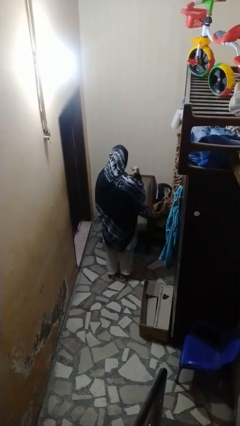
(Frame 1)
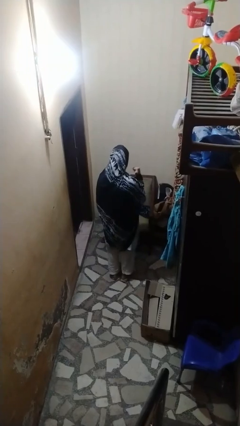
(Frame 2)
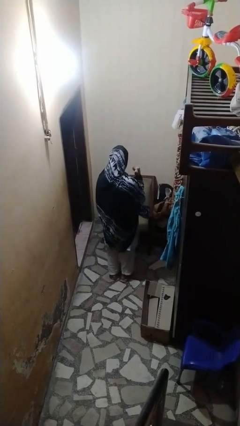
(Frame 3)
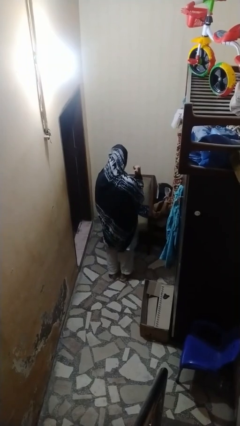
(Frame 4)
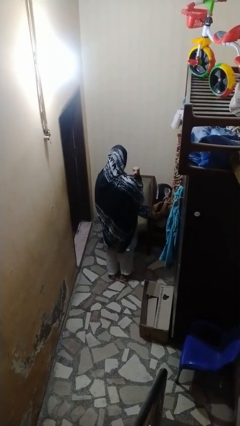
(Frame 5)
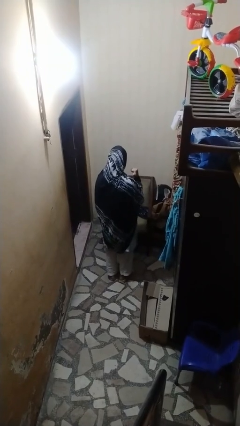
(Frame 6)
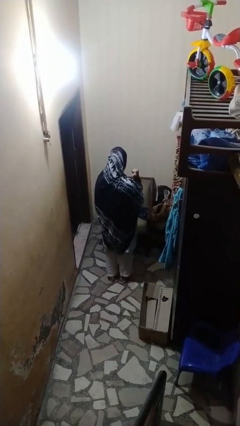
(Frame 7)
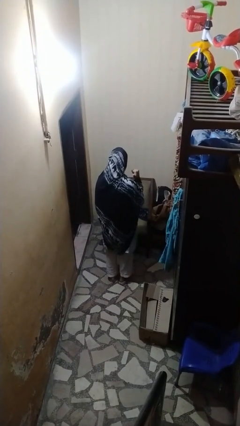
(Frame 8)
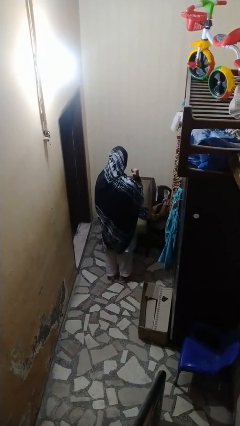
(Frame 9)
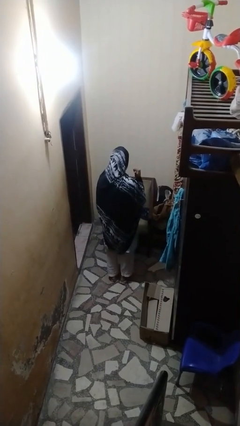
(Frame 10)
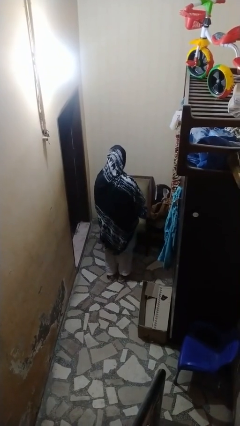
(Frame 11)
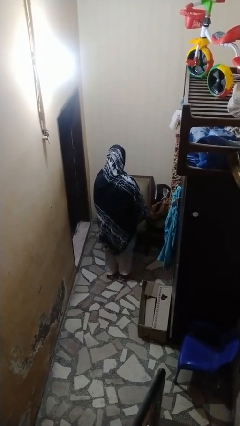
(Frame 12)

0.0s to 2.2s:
person gestures behind me

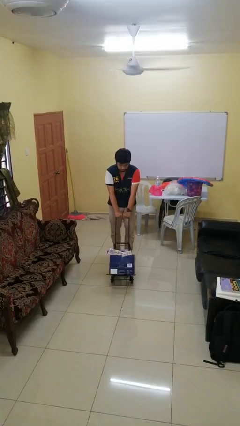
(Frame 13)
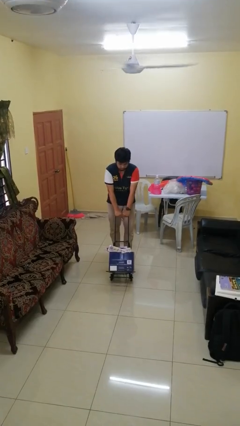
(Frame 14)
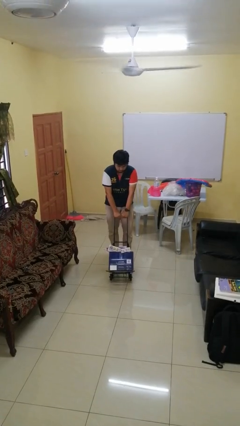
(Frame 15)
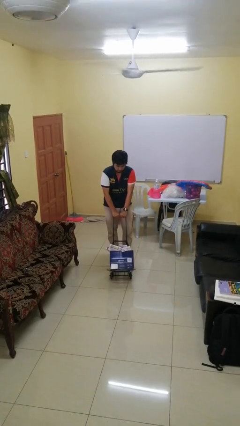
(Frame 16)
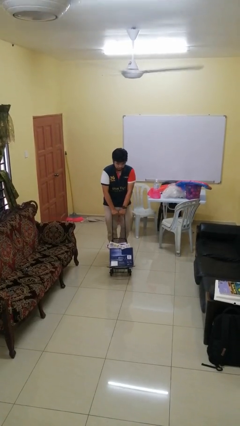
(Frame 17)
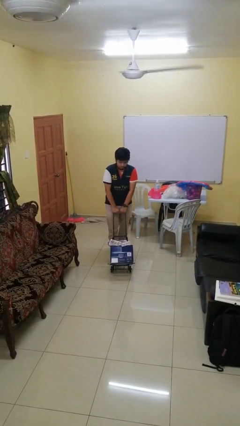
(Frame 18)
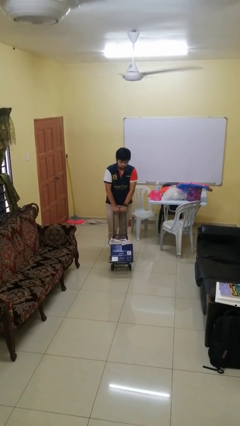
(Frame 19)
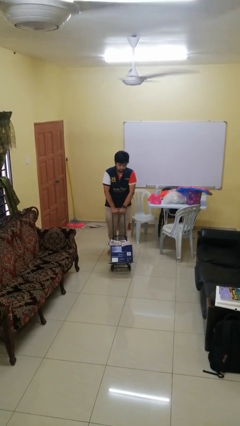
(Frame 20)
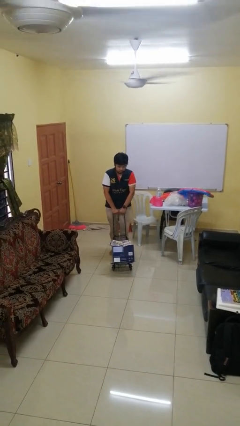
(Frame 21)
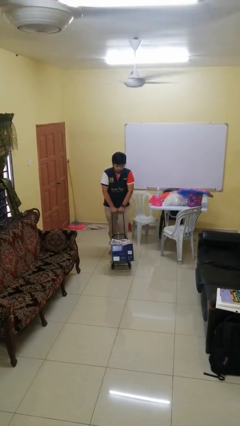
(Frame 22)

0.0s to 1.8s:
person pulls wheeled cart

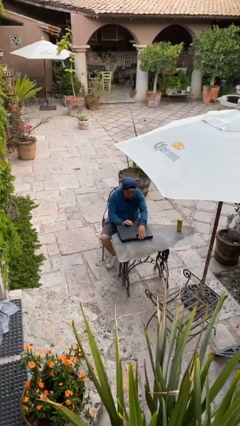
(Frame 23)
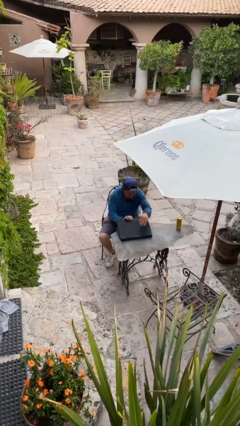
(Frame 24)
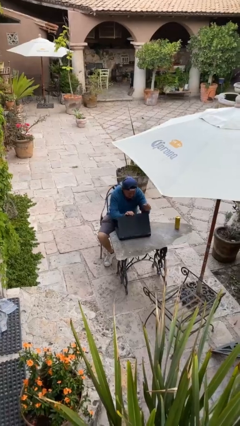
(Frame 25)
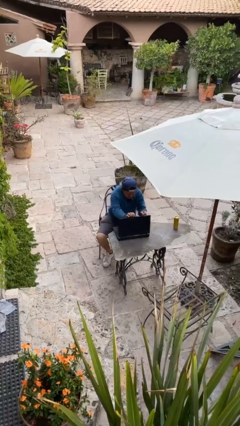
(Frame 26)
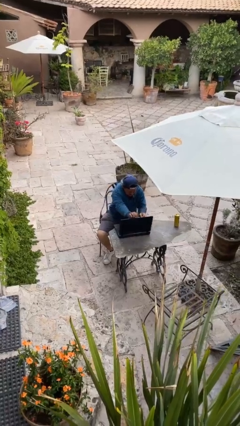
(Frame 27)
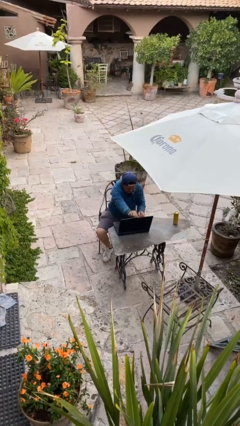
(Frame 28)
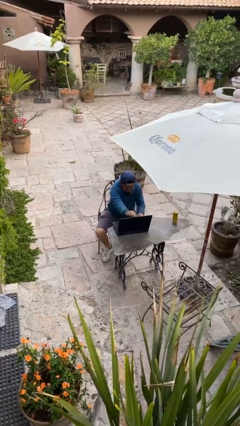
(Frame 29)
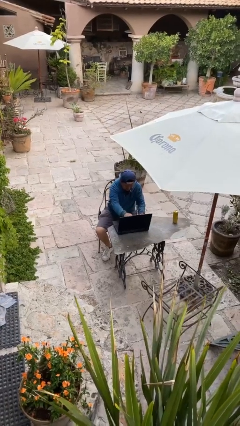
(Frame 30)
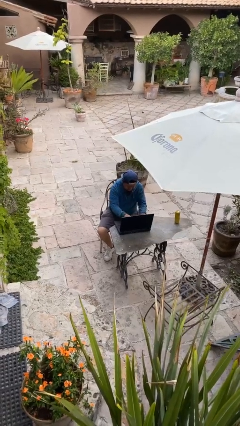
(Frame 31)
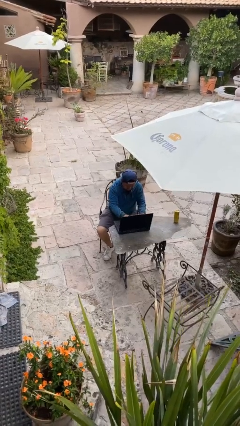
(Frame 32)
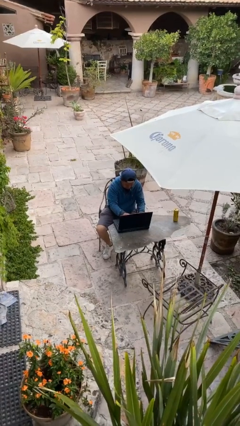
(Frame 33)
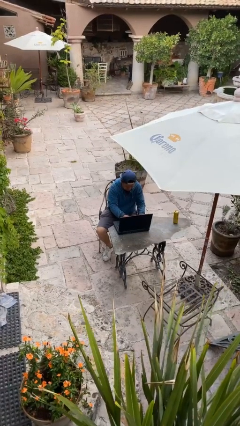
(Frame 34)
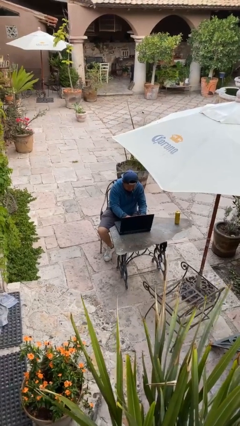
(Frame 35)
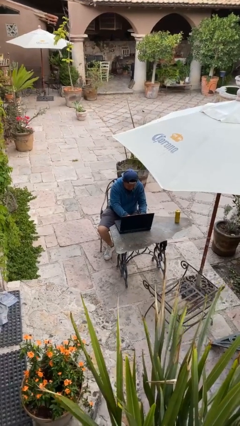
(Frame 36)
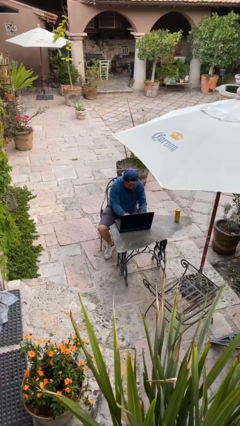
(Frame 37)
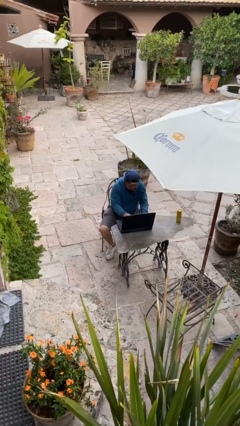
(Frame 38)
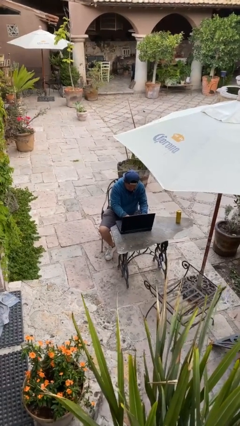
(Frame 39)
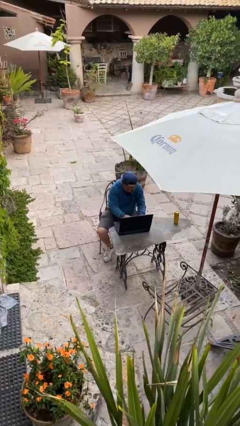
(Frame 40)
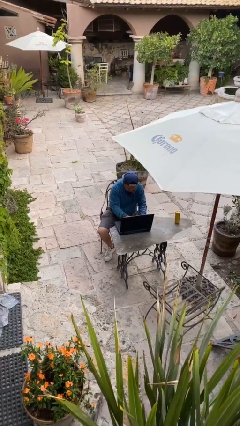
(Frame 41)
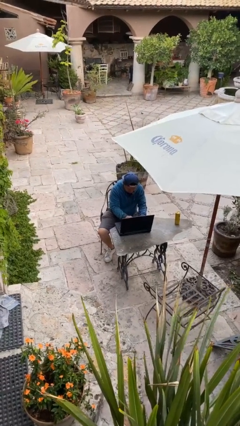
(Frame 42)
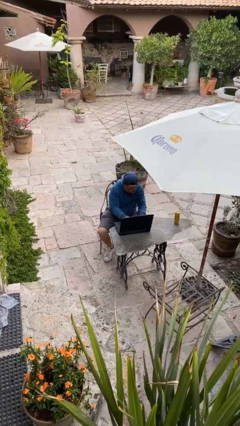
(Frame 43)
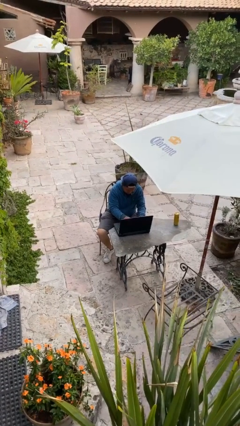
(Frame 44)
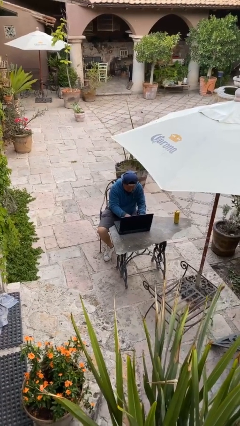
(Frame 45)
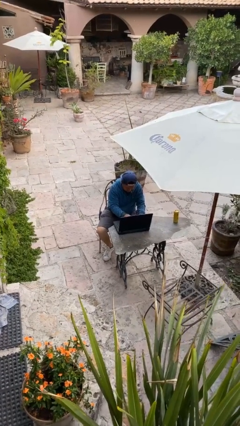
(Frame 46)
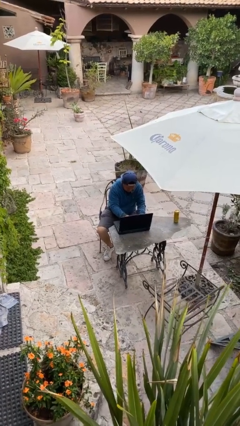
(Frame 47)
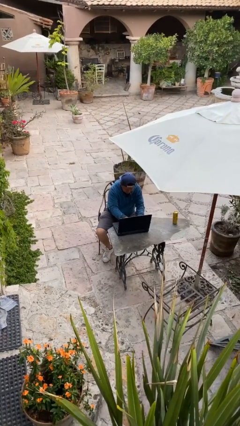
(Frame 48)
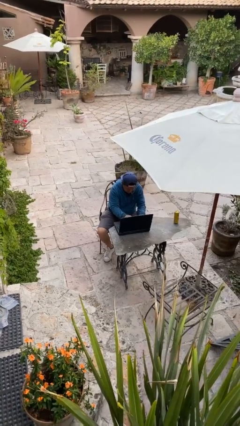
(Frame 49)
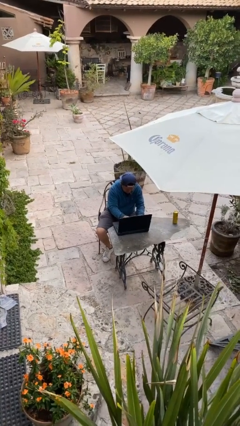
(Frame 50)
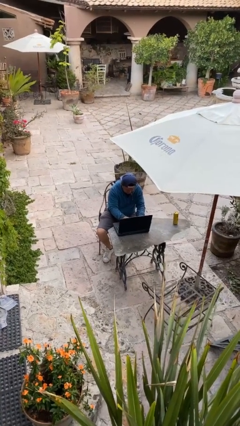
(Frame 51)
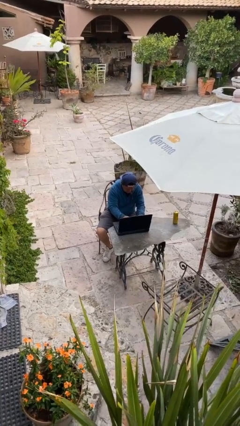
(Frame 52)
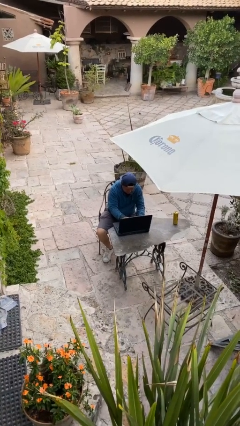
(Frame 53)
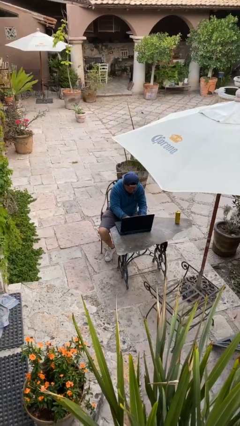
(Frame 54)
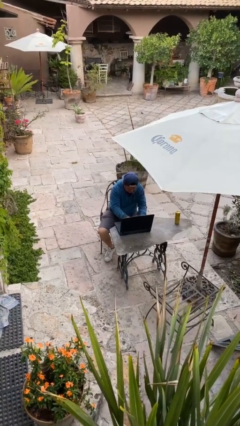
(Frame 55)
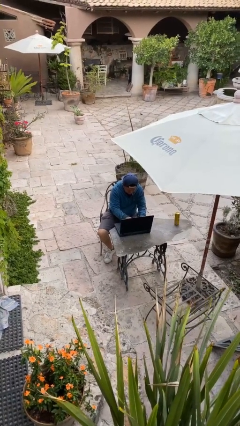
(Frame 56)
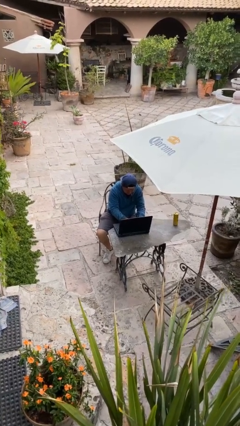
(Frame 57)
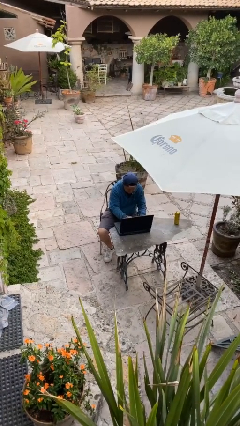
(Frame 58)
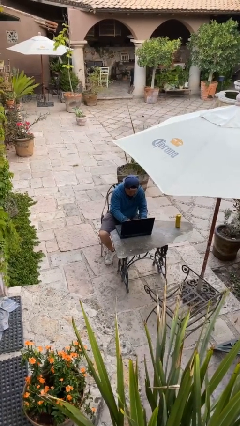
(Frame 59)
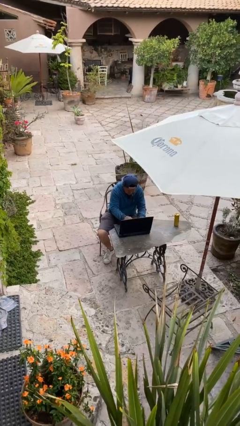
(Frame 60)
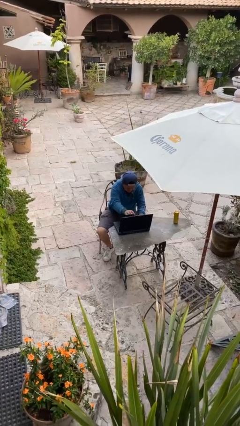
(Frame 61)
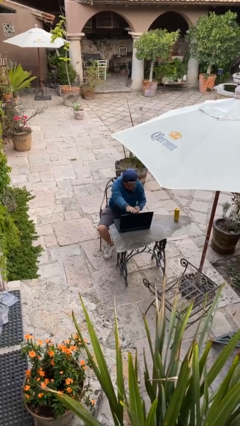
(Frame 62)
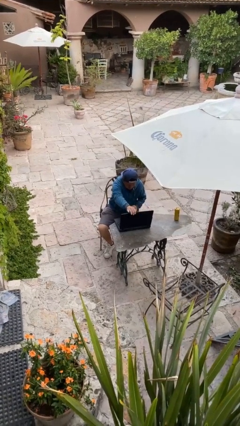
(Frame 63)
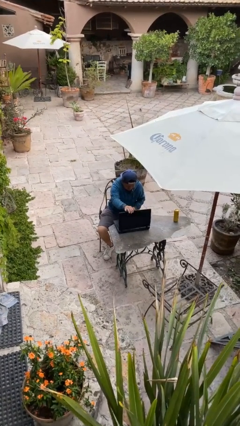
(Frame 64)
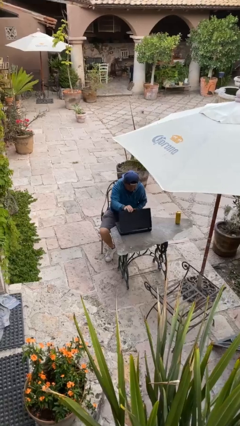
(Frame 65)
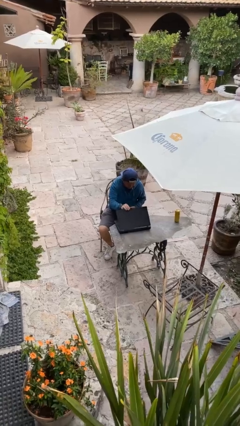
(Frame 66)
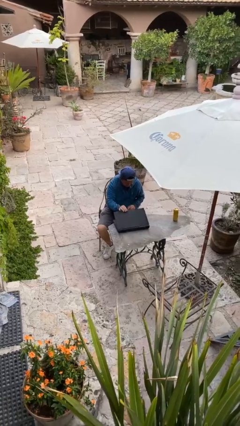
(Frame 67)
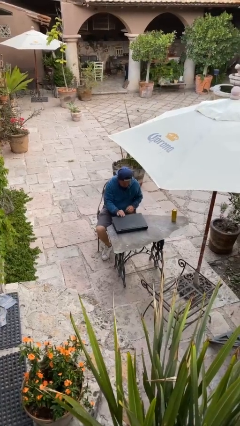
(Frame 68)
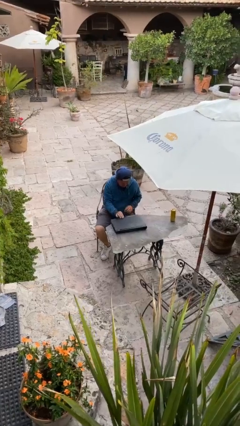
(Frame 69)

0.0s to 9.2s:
person interacts with laptop

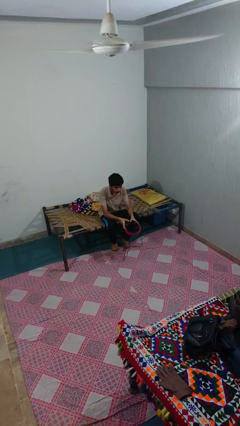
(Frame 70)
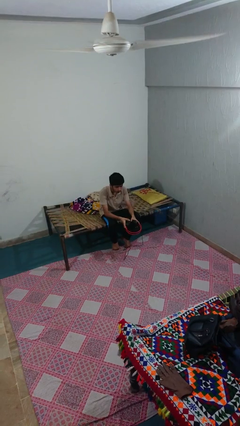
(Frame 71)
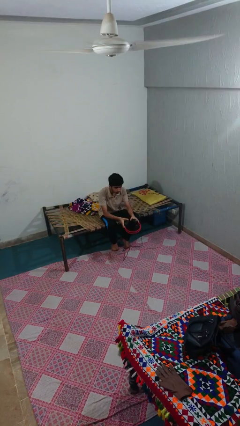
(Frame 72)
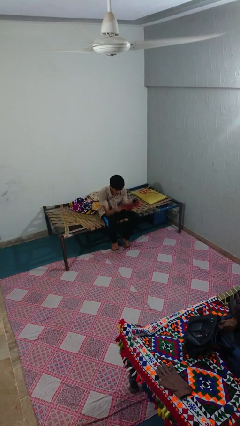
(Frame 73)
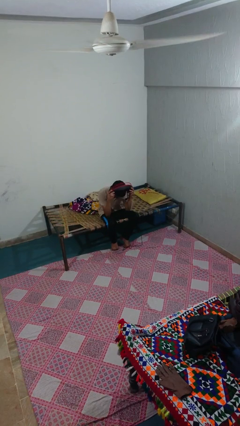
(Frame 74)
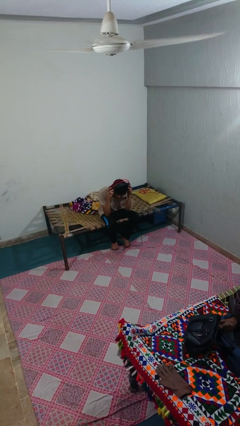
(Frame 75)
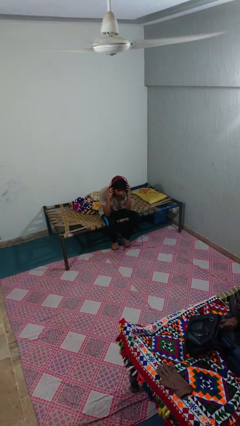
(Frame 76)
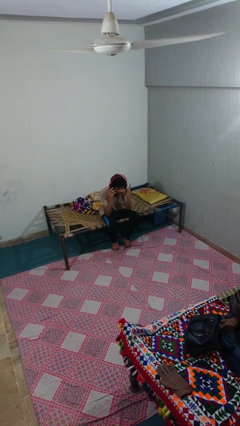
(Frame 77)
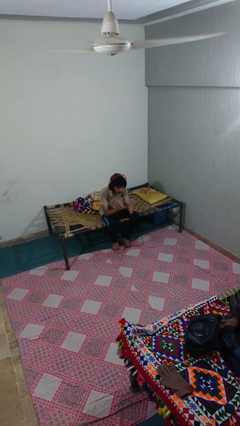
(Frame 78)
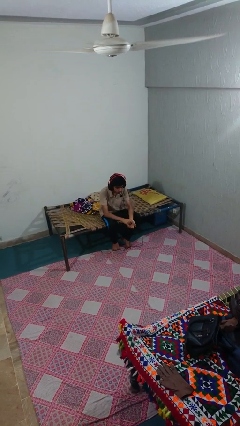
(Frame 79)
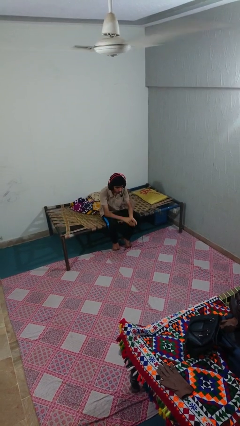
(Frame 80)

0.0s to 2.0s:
person puts on headphones

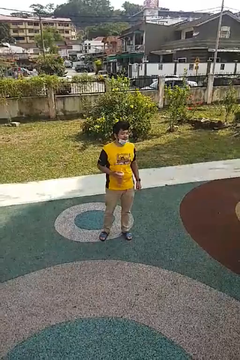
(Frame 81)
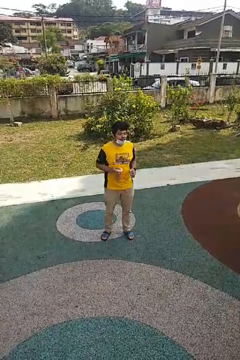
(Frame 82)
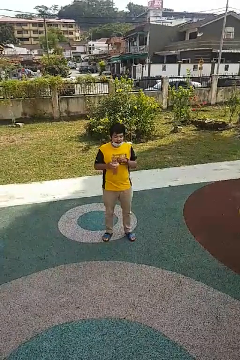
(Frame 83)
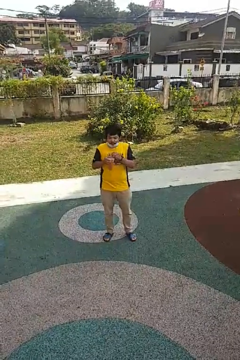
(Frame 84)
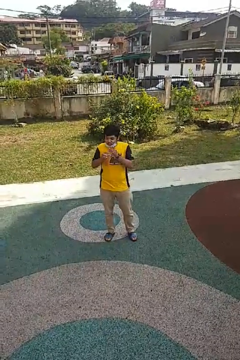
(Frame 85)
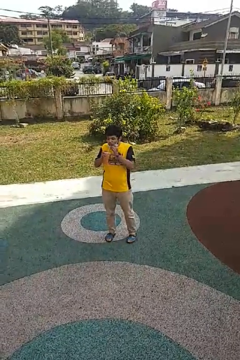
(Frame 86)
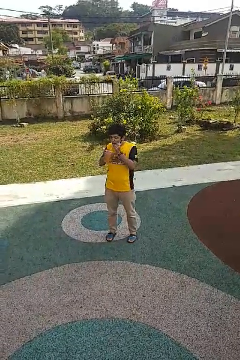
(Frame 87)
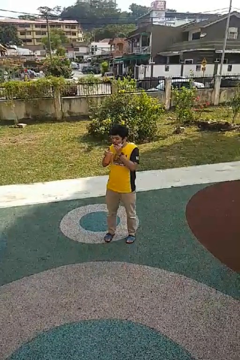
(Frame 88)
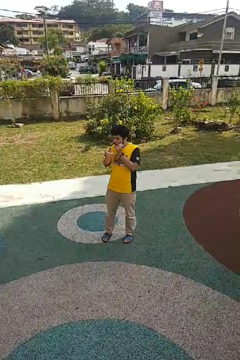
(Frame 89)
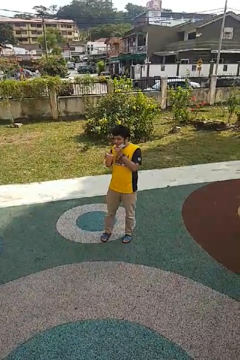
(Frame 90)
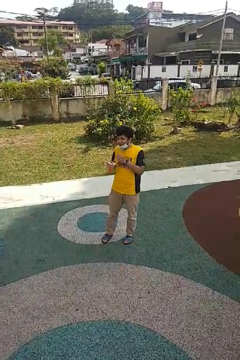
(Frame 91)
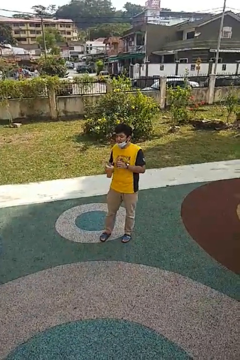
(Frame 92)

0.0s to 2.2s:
person drinks from straw
